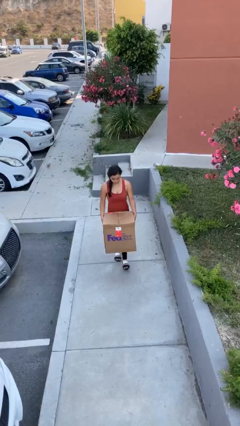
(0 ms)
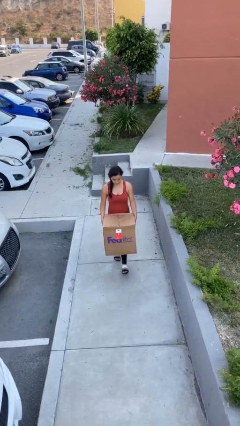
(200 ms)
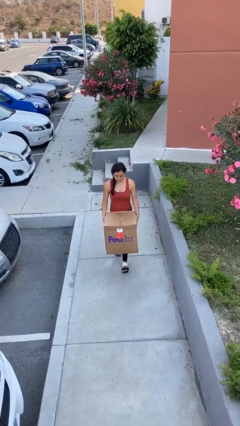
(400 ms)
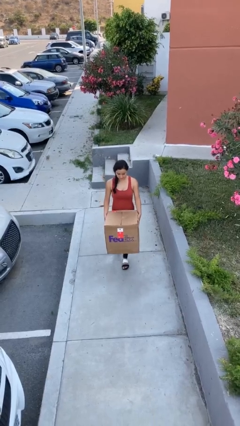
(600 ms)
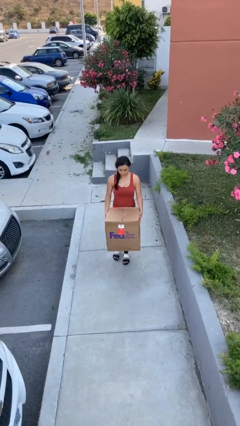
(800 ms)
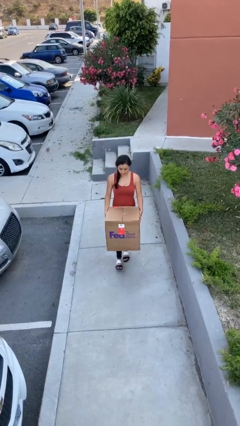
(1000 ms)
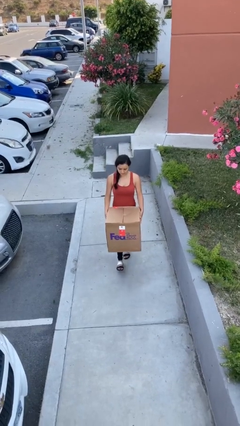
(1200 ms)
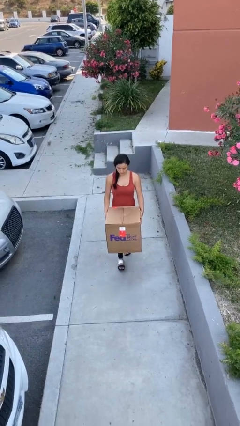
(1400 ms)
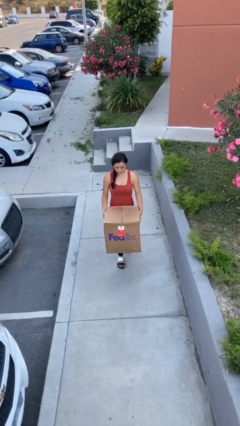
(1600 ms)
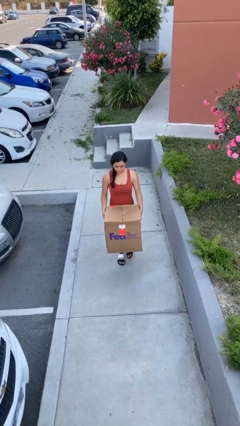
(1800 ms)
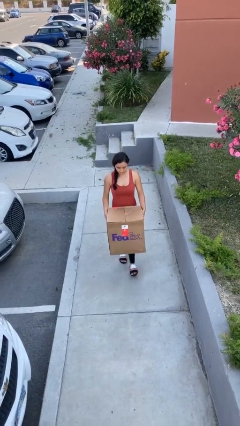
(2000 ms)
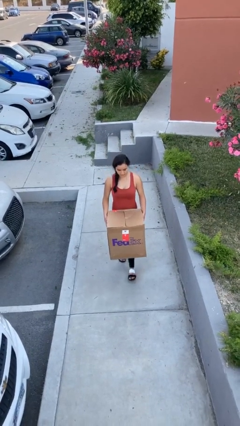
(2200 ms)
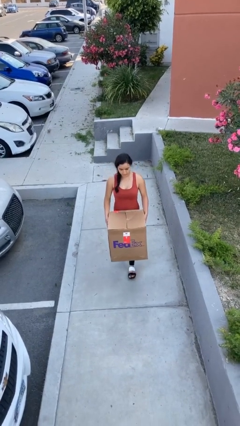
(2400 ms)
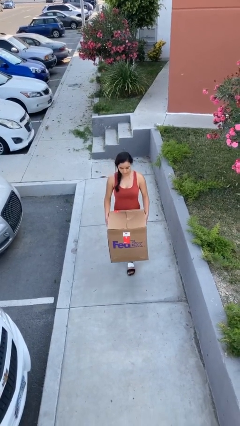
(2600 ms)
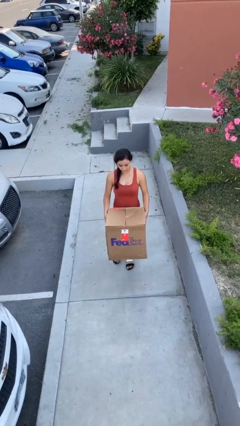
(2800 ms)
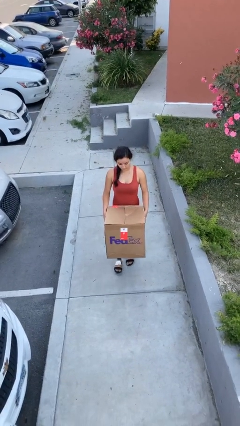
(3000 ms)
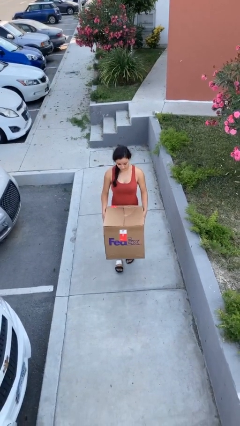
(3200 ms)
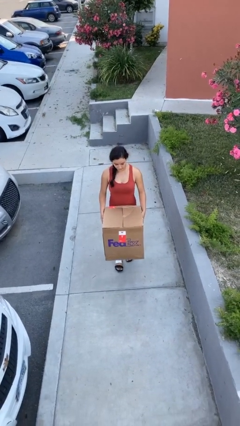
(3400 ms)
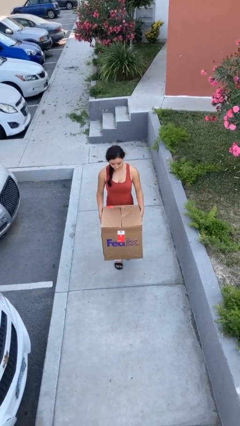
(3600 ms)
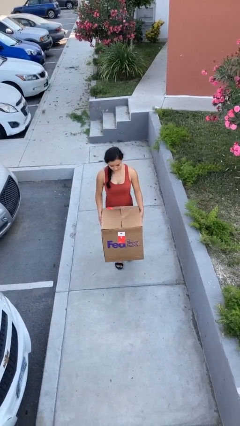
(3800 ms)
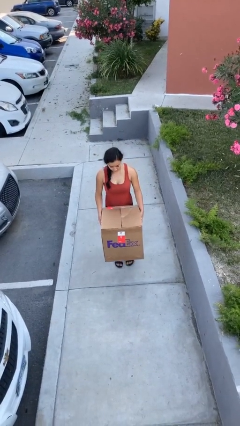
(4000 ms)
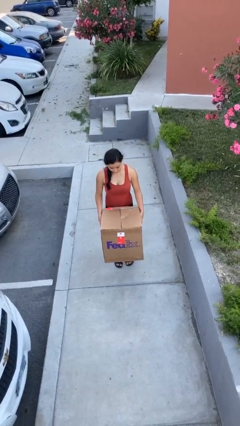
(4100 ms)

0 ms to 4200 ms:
person carries heavy object

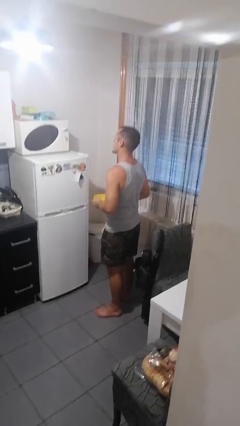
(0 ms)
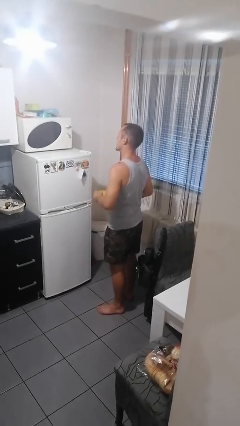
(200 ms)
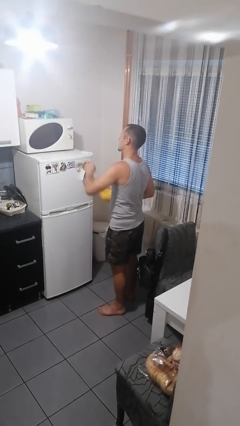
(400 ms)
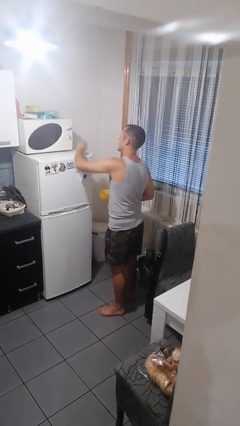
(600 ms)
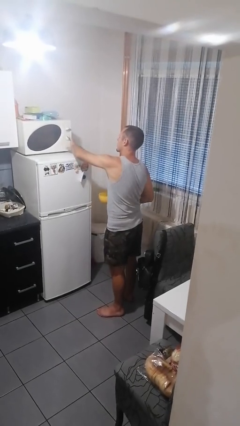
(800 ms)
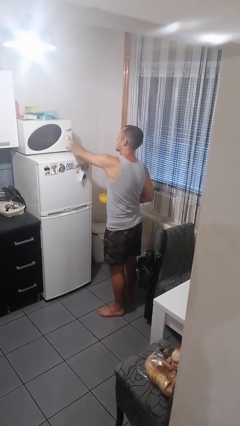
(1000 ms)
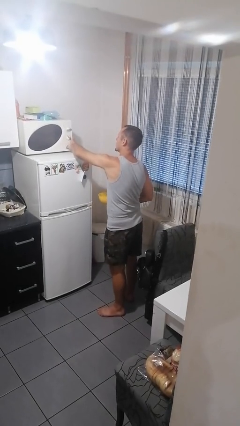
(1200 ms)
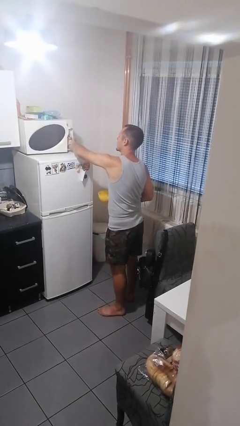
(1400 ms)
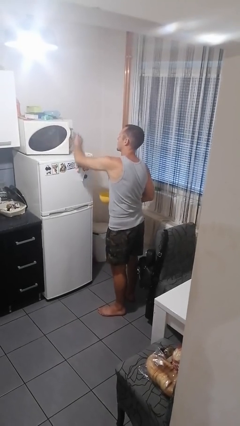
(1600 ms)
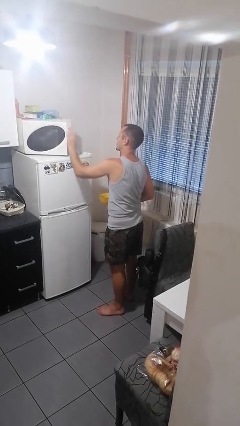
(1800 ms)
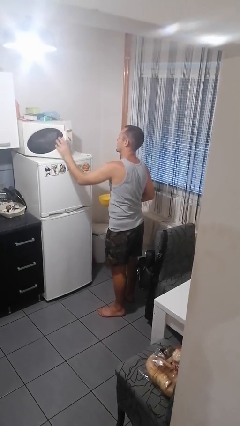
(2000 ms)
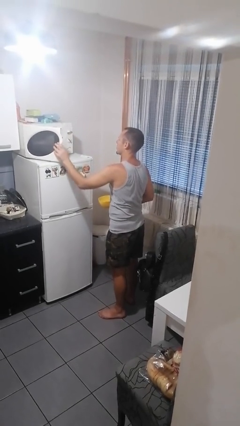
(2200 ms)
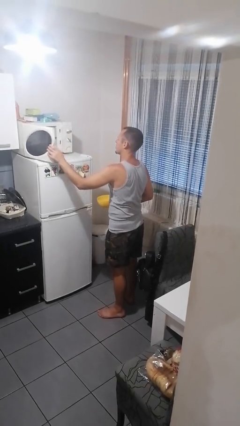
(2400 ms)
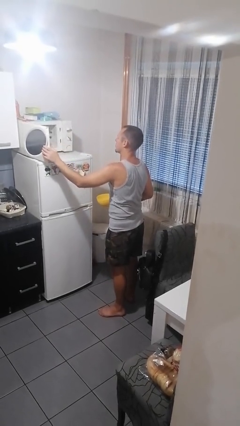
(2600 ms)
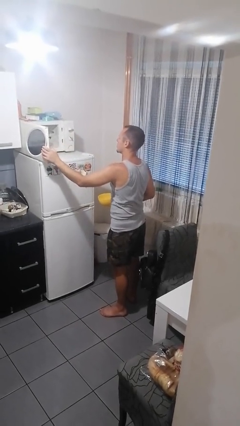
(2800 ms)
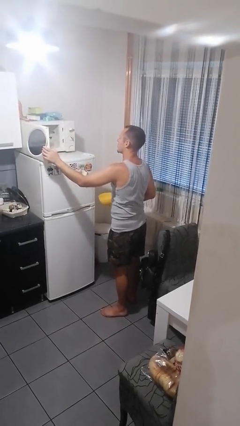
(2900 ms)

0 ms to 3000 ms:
person opens microwave

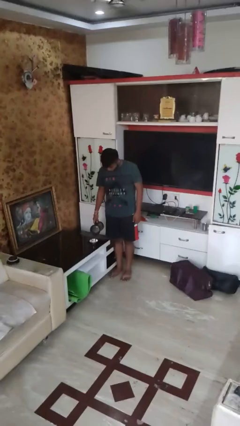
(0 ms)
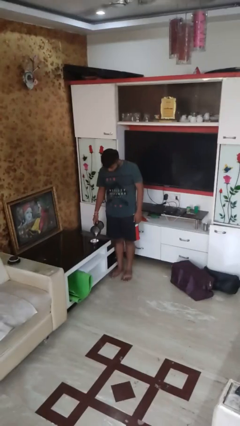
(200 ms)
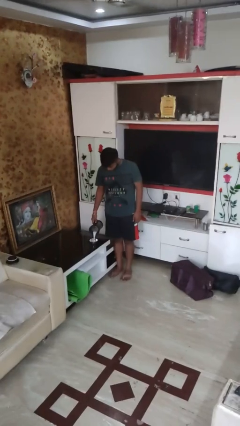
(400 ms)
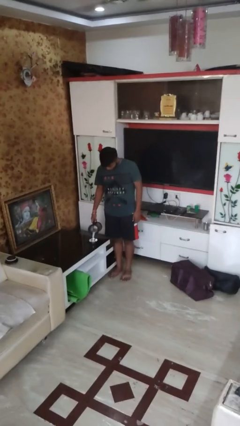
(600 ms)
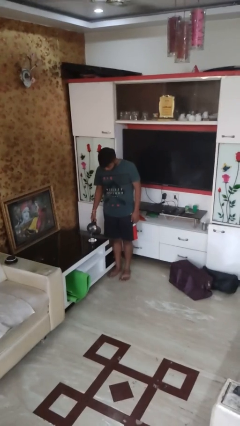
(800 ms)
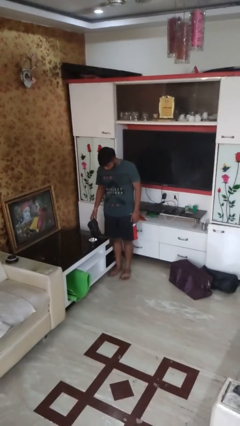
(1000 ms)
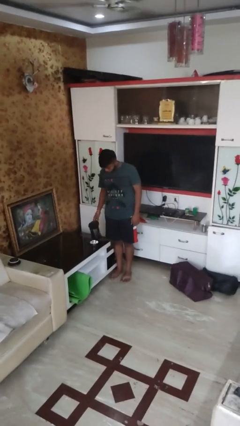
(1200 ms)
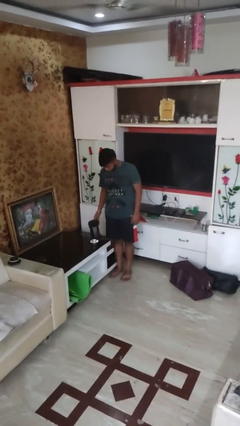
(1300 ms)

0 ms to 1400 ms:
person pours into bowl

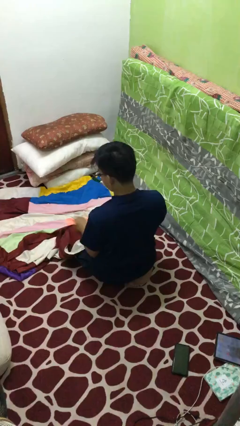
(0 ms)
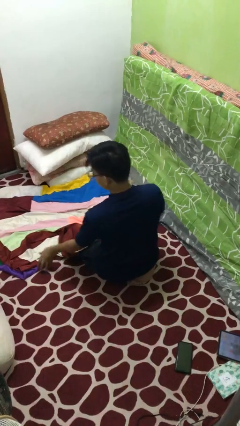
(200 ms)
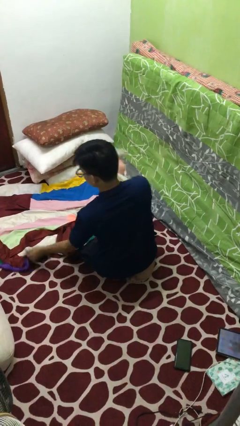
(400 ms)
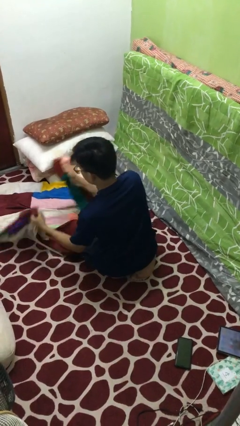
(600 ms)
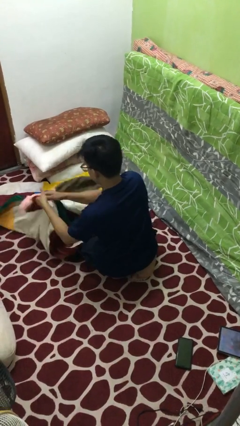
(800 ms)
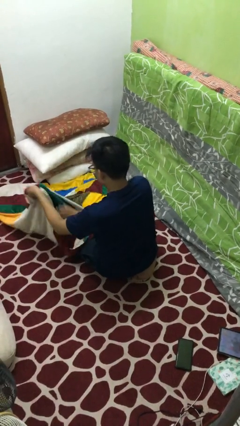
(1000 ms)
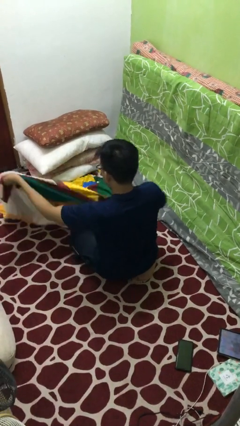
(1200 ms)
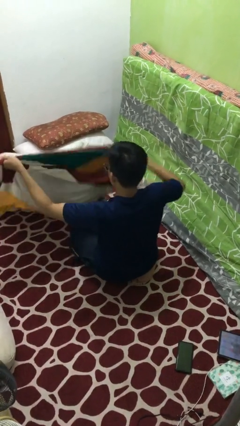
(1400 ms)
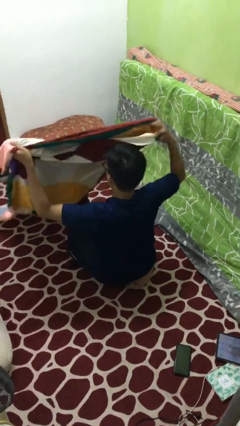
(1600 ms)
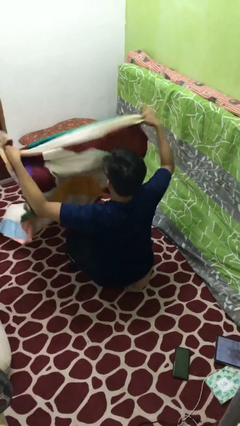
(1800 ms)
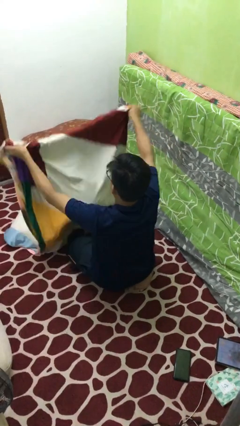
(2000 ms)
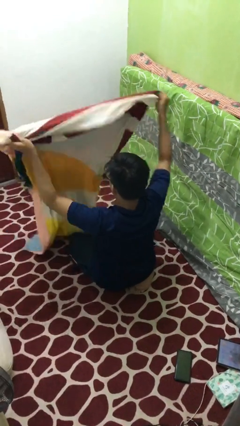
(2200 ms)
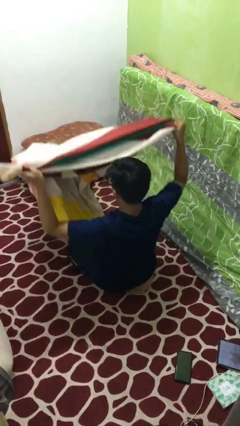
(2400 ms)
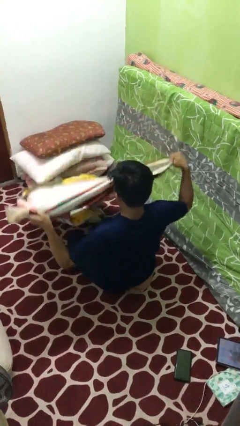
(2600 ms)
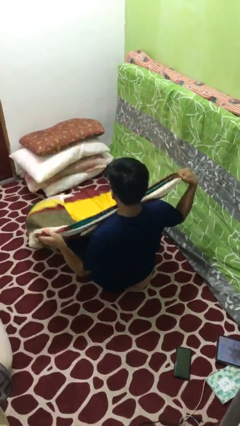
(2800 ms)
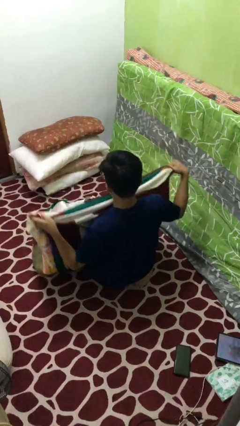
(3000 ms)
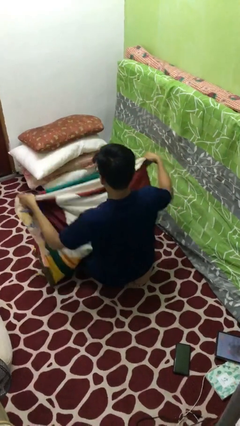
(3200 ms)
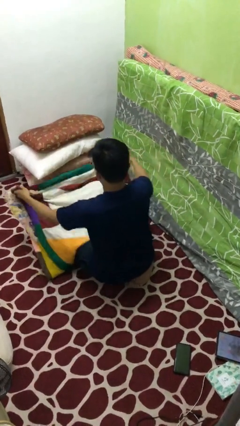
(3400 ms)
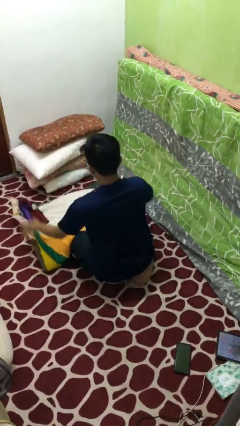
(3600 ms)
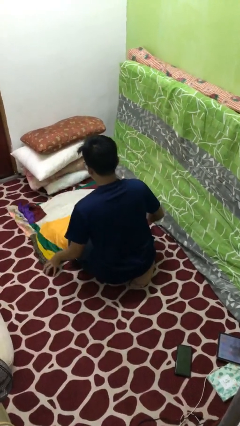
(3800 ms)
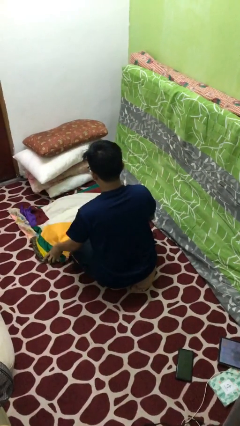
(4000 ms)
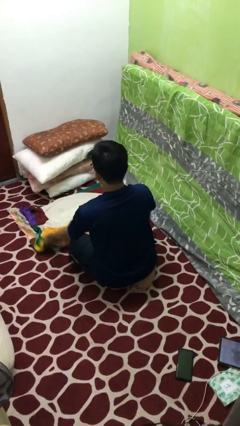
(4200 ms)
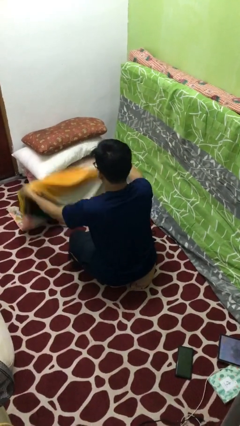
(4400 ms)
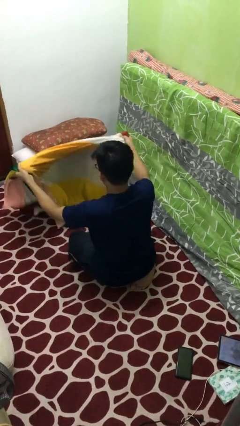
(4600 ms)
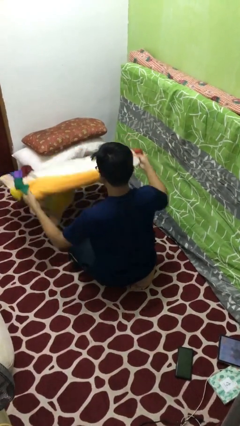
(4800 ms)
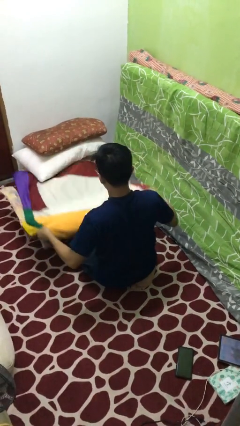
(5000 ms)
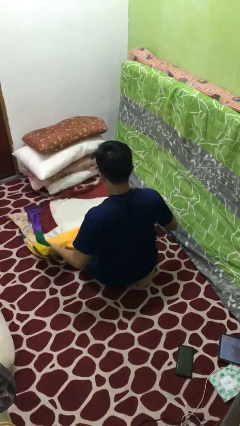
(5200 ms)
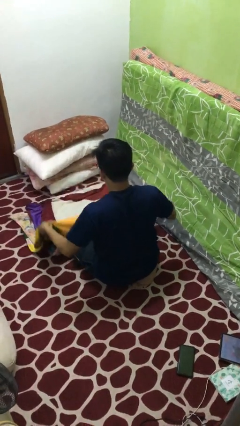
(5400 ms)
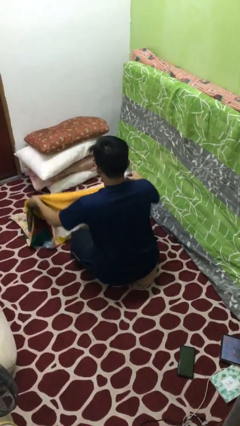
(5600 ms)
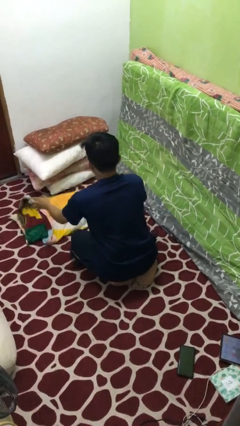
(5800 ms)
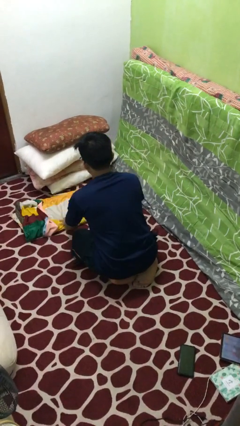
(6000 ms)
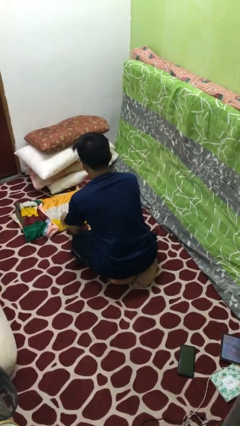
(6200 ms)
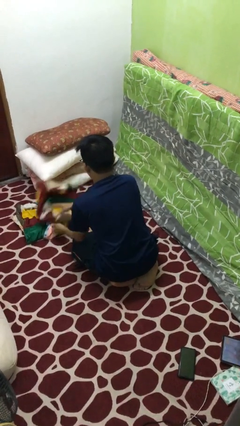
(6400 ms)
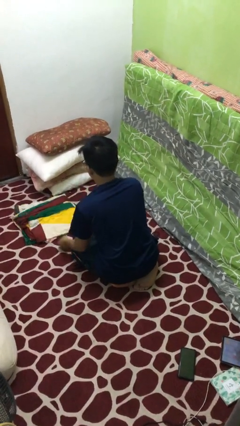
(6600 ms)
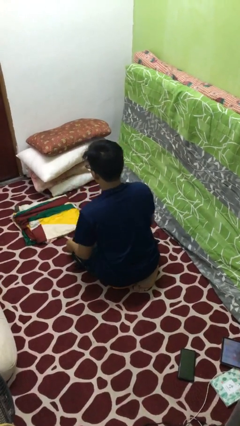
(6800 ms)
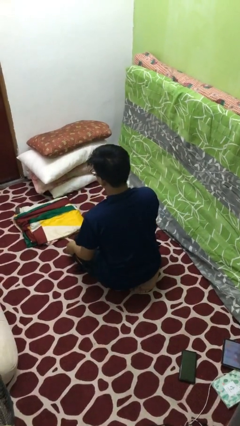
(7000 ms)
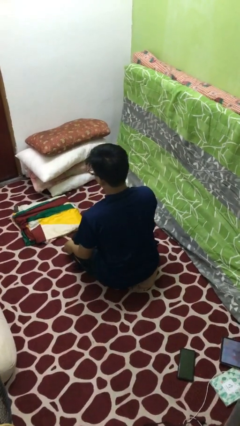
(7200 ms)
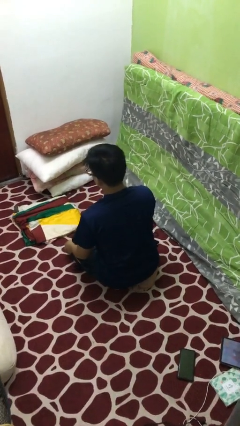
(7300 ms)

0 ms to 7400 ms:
person folds blanket

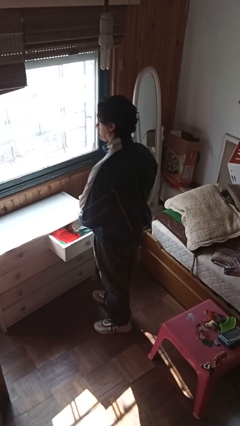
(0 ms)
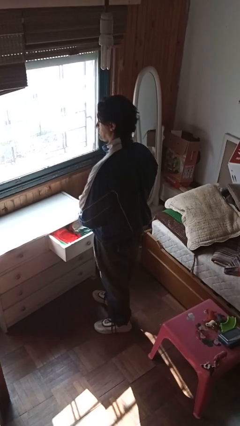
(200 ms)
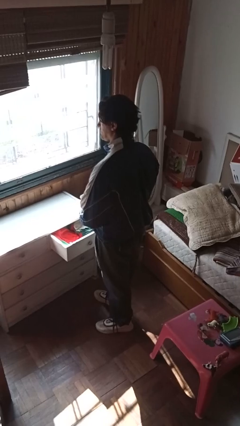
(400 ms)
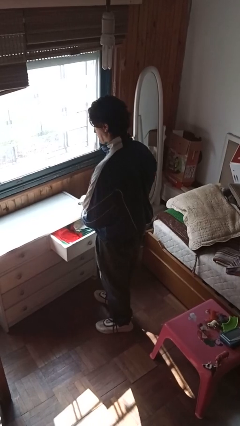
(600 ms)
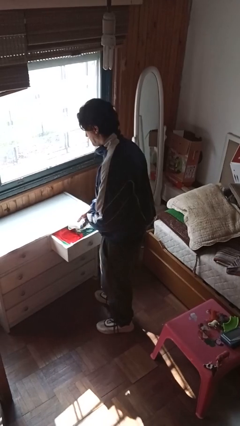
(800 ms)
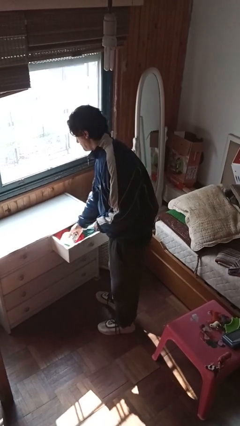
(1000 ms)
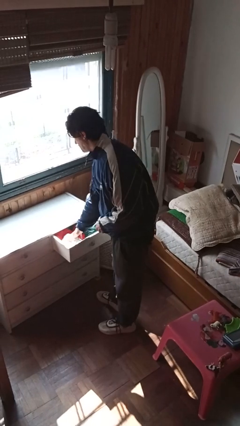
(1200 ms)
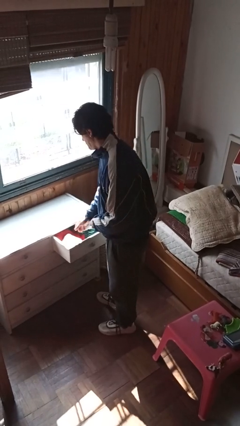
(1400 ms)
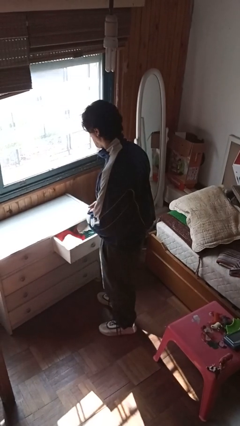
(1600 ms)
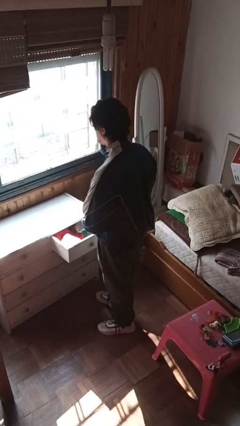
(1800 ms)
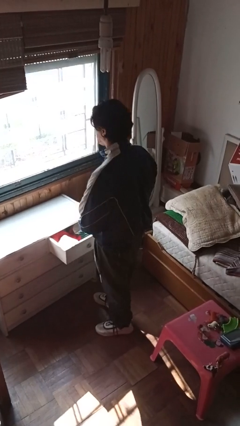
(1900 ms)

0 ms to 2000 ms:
person puts clothes into dresser
